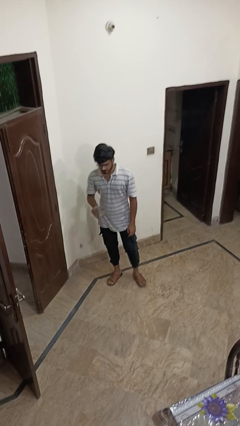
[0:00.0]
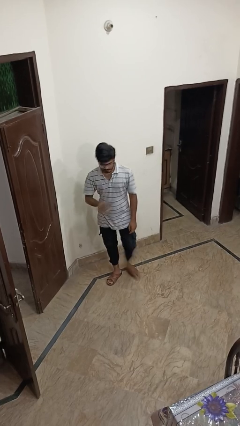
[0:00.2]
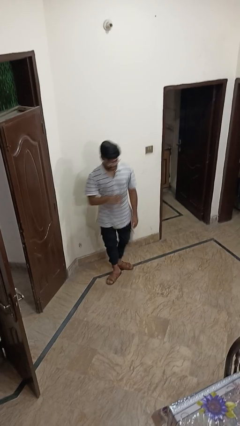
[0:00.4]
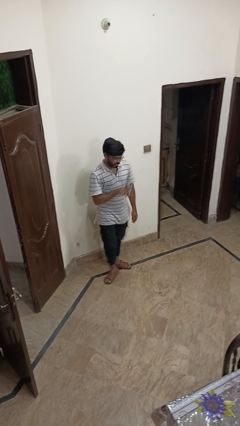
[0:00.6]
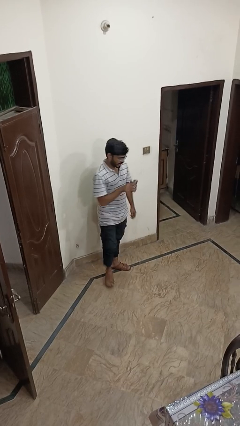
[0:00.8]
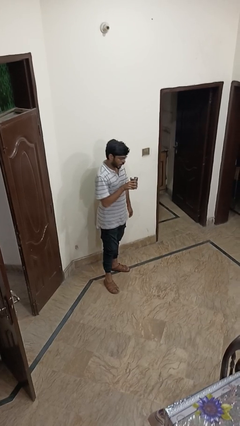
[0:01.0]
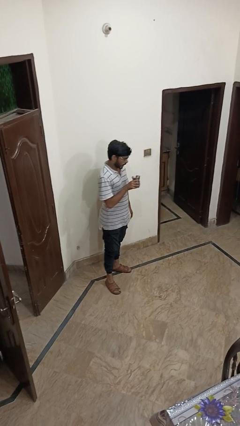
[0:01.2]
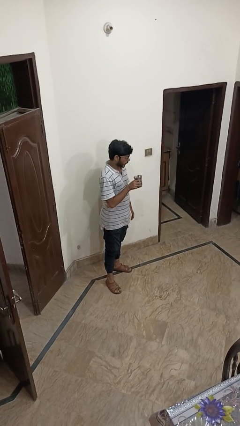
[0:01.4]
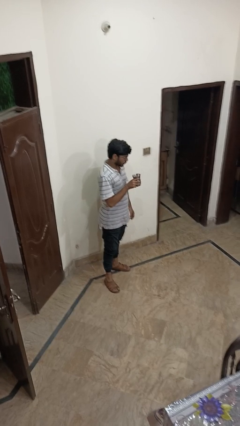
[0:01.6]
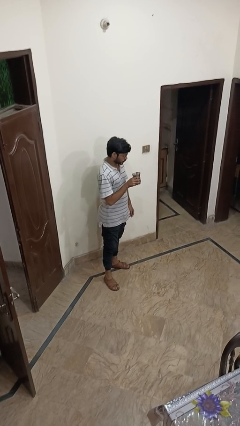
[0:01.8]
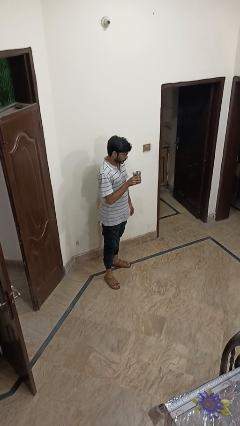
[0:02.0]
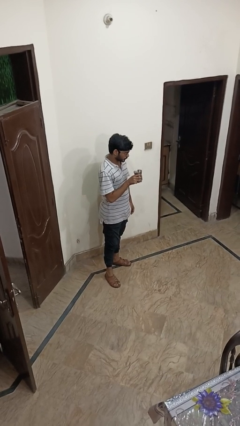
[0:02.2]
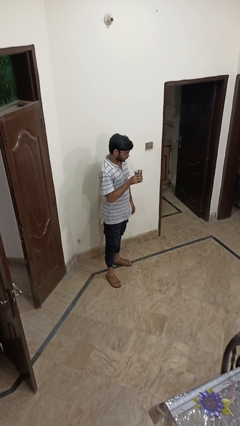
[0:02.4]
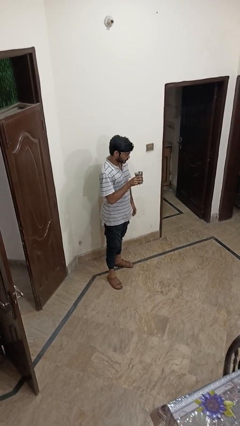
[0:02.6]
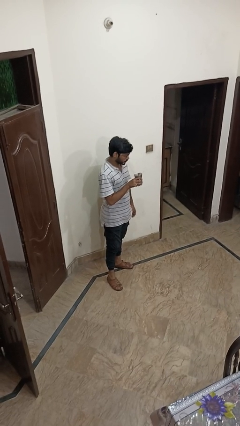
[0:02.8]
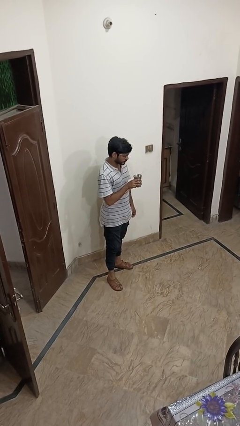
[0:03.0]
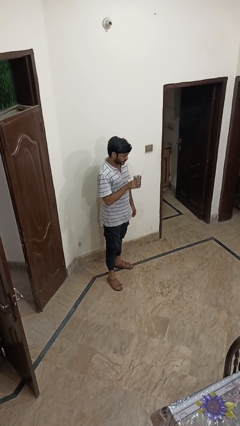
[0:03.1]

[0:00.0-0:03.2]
person drinks from straw

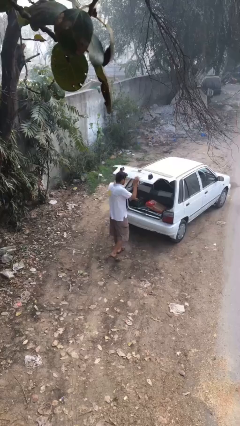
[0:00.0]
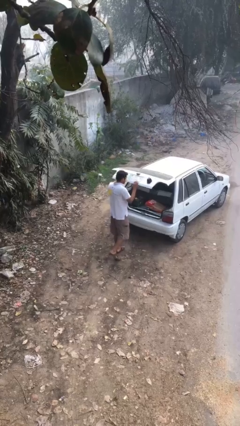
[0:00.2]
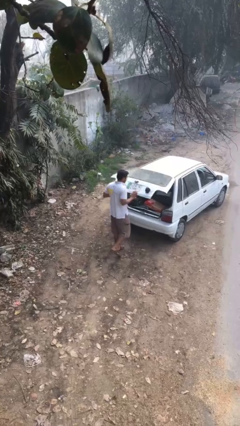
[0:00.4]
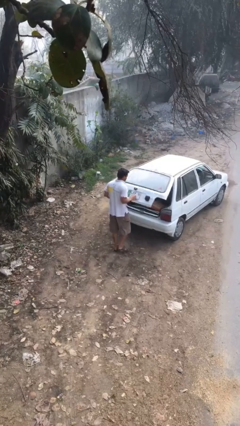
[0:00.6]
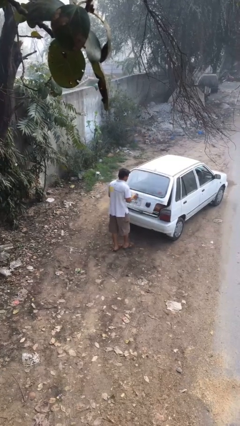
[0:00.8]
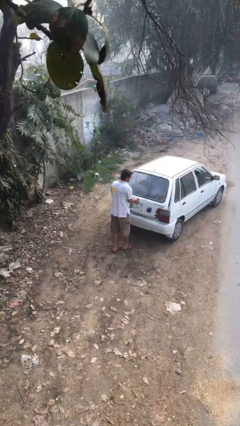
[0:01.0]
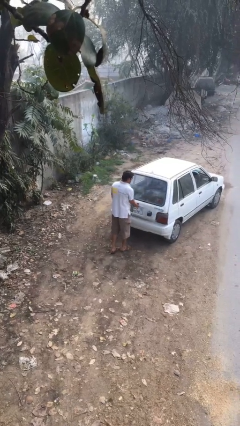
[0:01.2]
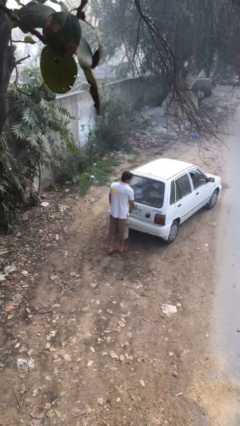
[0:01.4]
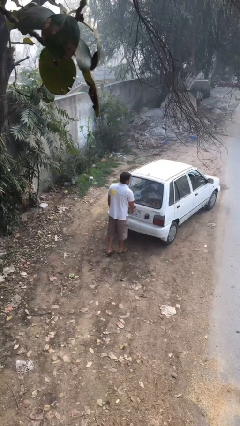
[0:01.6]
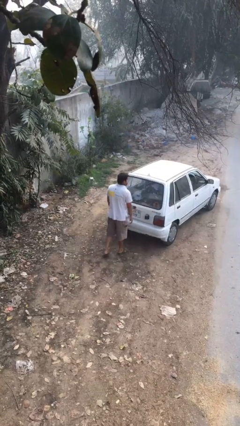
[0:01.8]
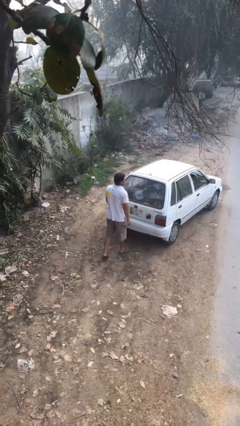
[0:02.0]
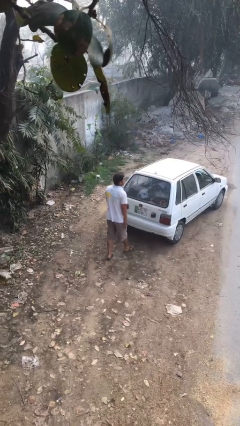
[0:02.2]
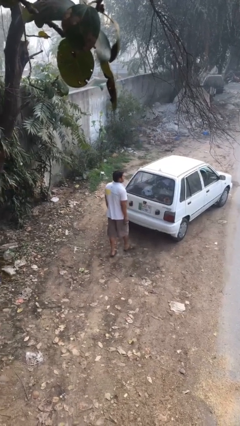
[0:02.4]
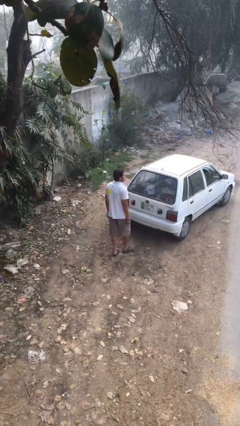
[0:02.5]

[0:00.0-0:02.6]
person closes car trunk

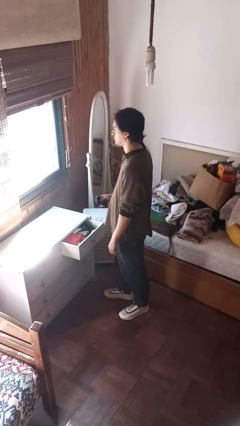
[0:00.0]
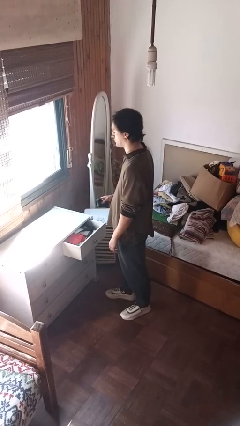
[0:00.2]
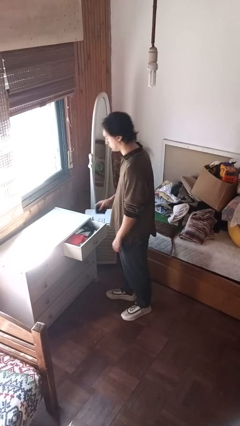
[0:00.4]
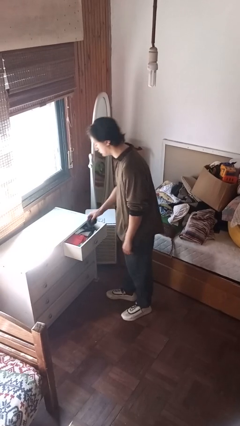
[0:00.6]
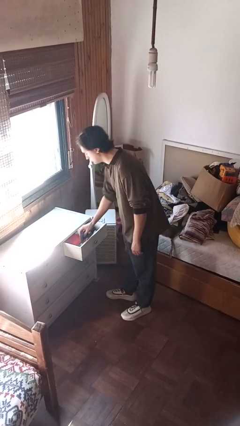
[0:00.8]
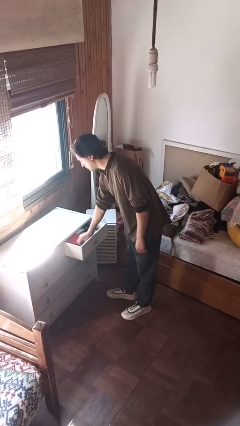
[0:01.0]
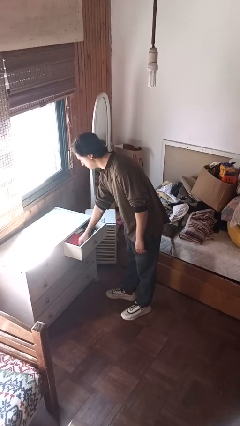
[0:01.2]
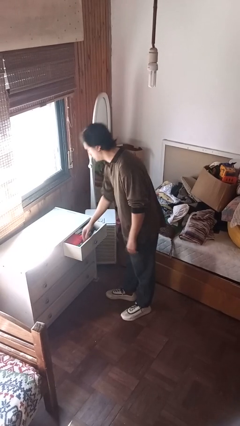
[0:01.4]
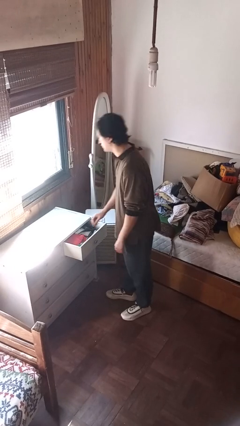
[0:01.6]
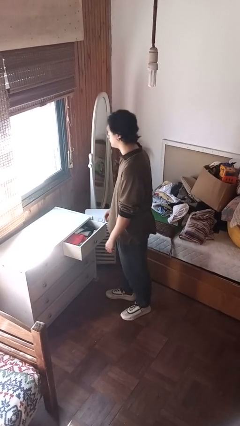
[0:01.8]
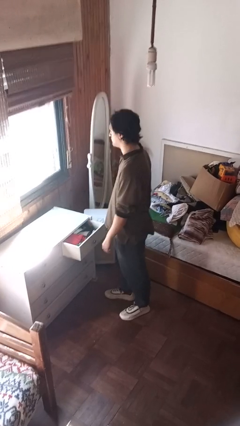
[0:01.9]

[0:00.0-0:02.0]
person puts clothes into dresser

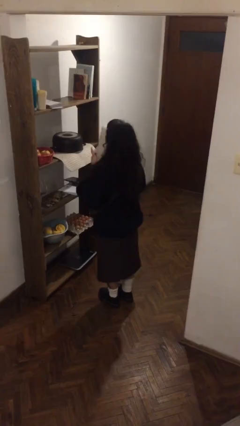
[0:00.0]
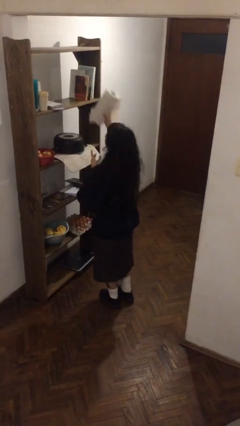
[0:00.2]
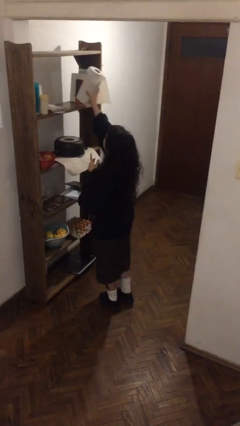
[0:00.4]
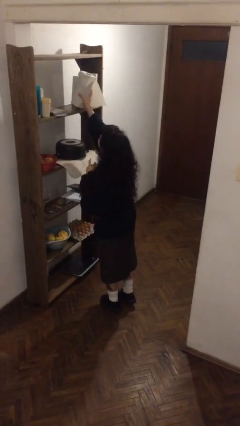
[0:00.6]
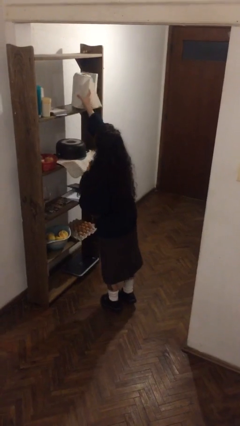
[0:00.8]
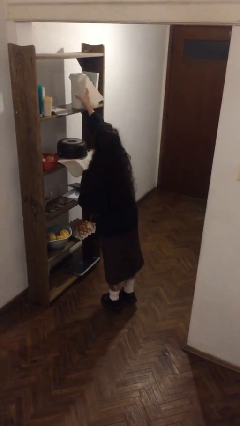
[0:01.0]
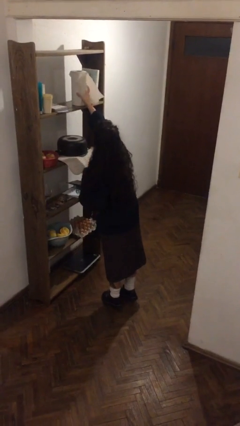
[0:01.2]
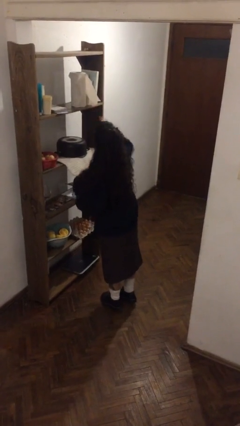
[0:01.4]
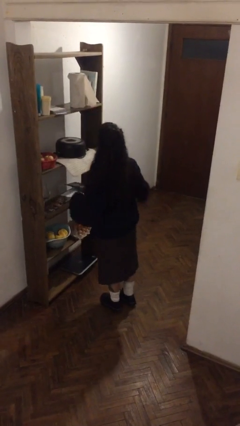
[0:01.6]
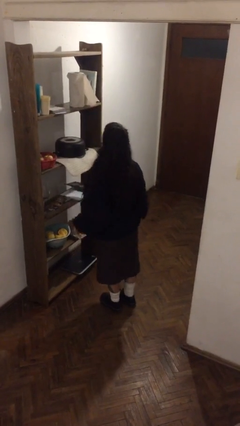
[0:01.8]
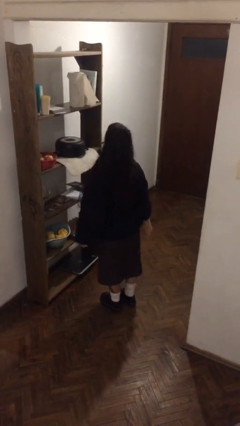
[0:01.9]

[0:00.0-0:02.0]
person puts down object on shelf

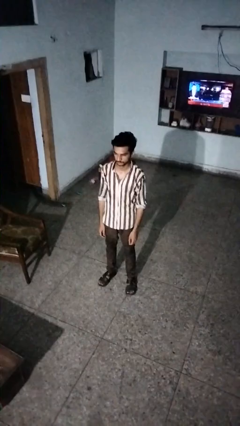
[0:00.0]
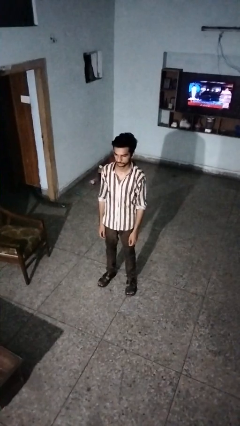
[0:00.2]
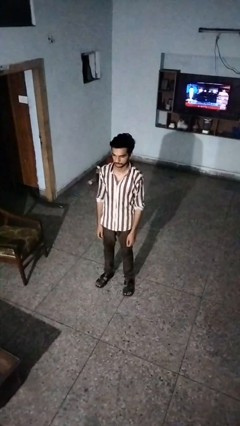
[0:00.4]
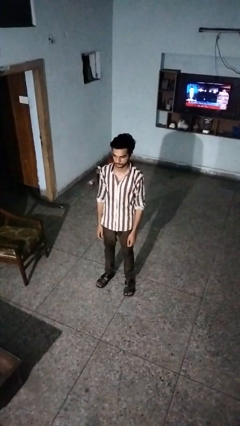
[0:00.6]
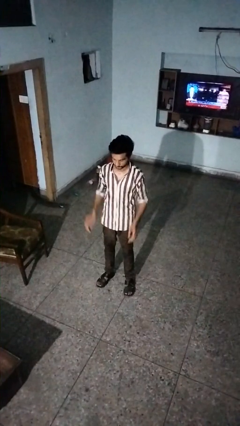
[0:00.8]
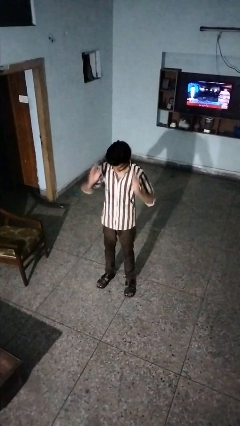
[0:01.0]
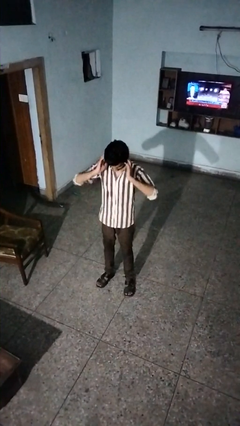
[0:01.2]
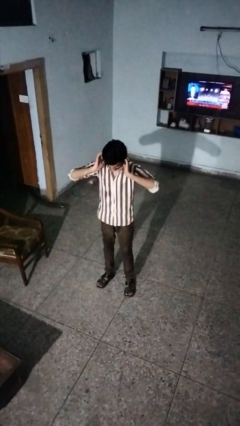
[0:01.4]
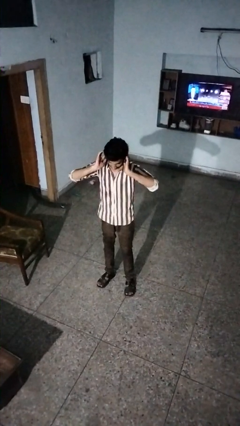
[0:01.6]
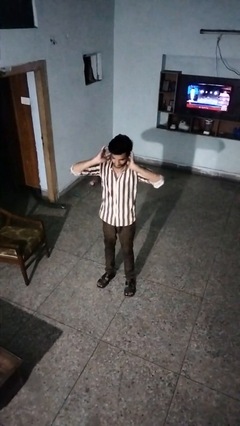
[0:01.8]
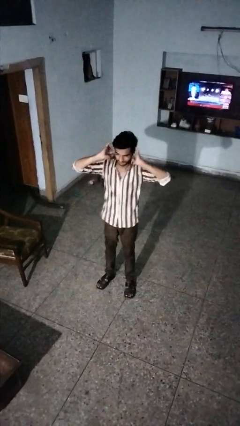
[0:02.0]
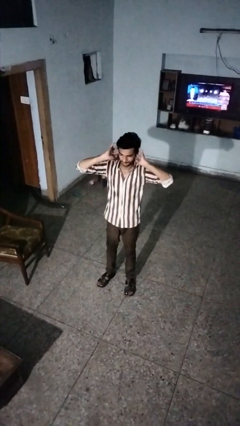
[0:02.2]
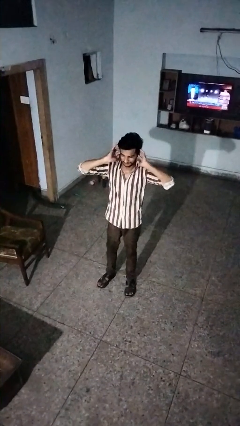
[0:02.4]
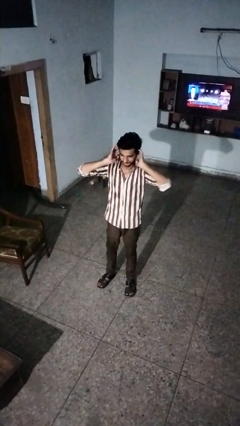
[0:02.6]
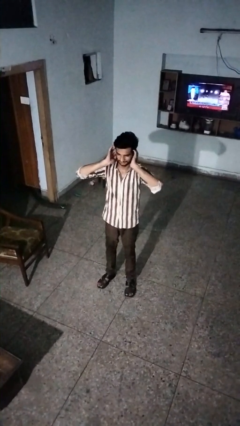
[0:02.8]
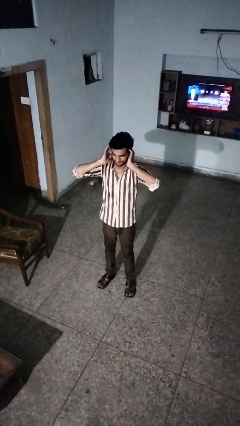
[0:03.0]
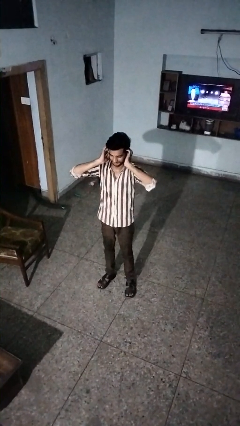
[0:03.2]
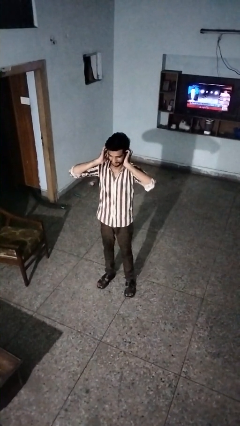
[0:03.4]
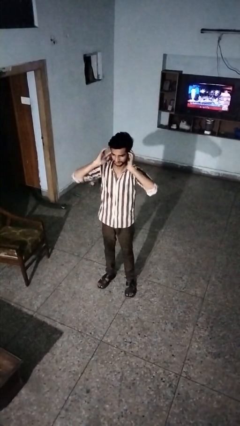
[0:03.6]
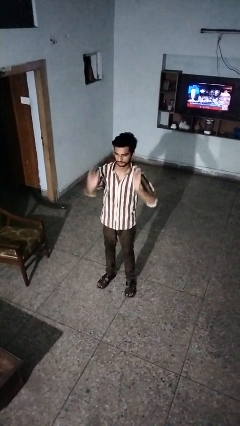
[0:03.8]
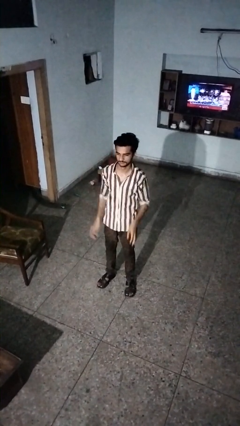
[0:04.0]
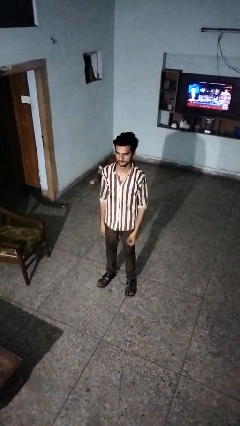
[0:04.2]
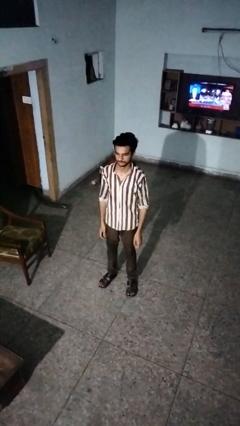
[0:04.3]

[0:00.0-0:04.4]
person puts fingers in ear

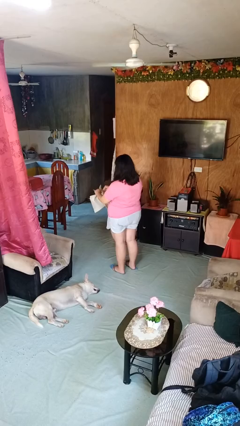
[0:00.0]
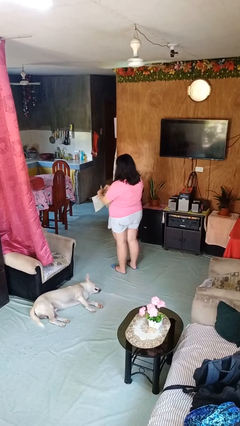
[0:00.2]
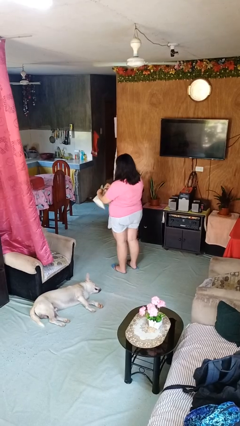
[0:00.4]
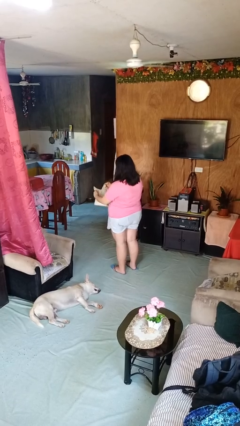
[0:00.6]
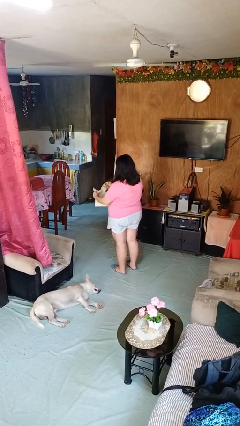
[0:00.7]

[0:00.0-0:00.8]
person tears paper

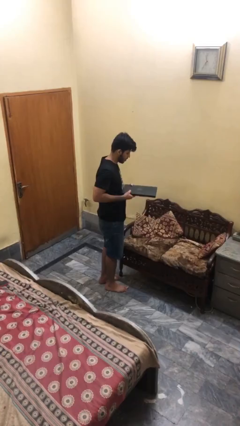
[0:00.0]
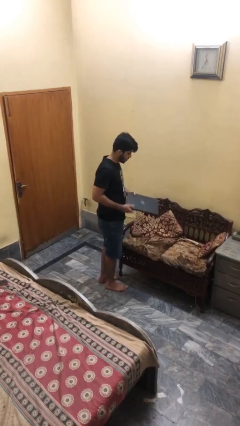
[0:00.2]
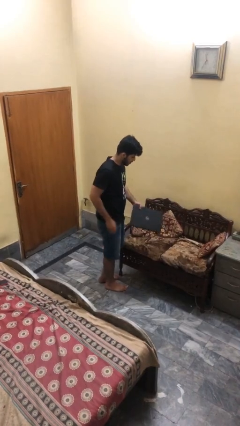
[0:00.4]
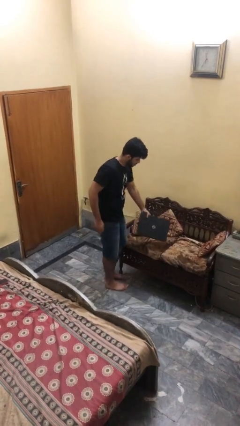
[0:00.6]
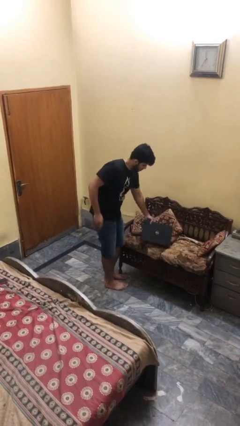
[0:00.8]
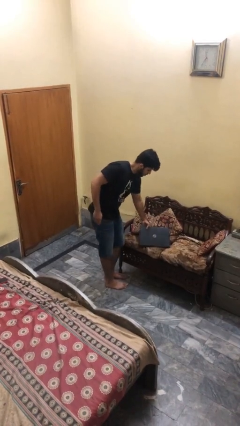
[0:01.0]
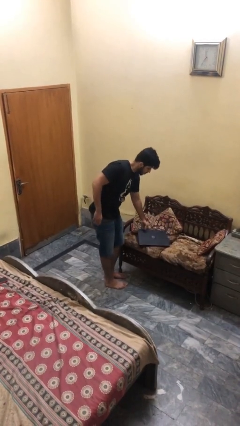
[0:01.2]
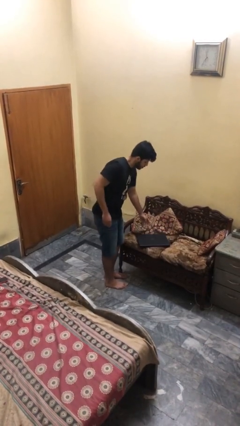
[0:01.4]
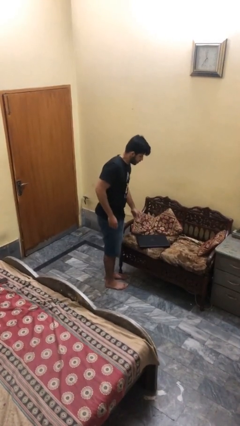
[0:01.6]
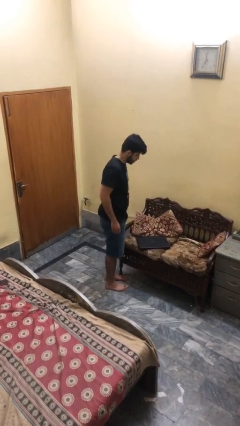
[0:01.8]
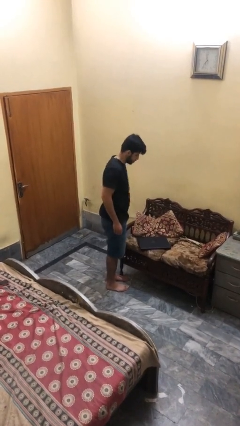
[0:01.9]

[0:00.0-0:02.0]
person puts down object on couch
